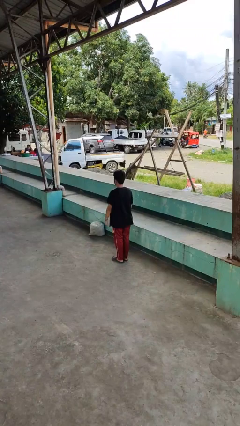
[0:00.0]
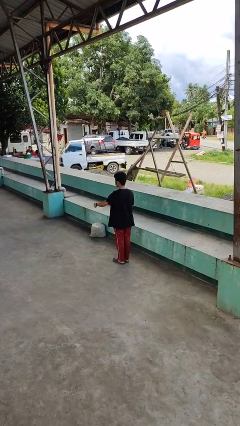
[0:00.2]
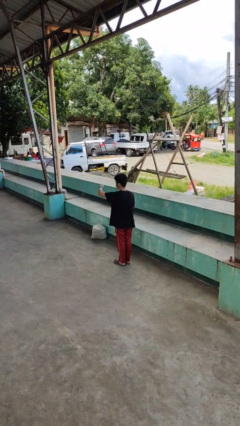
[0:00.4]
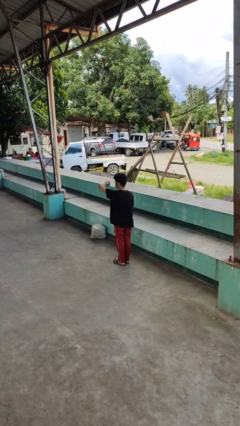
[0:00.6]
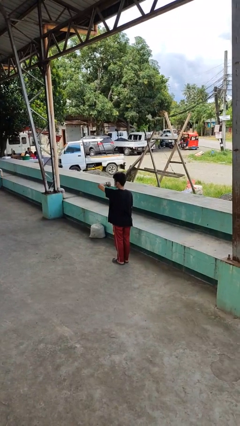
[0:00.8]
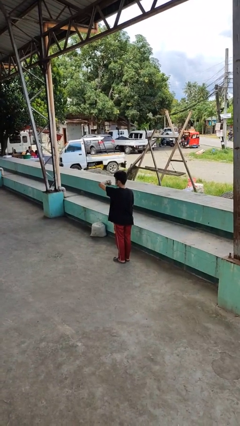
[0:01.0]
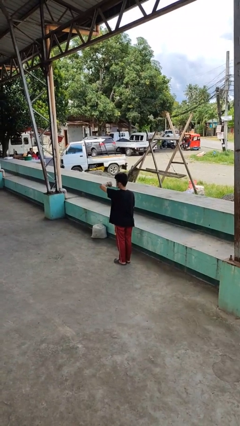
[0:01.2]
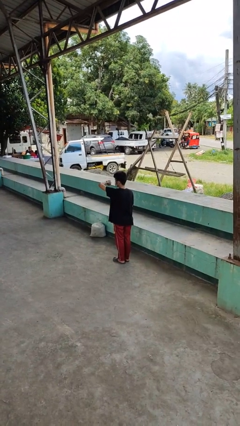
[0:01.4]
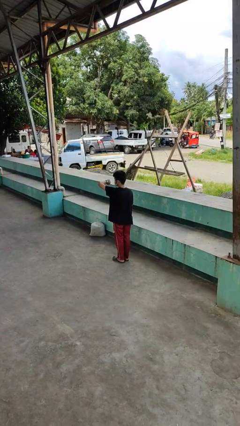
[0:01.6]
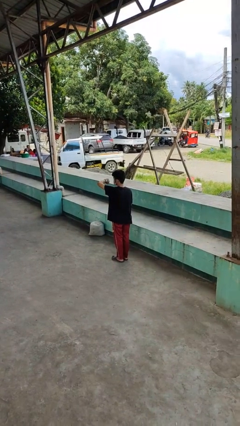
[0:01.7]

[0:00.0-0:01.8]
person looks at wristwatch

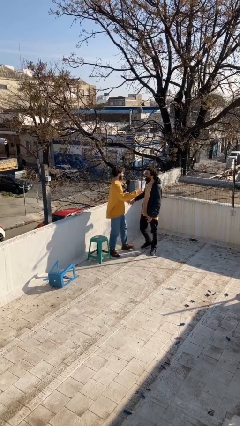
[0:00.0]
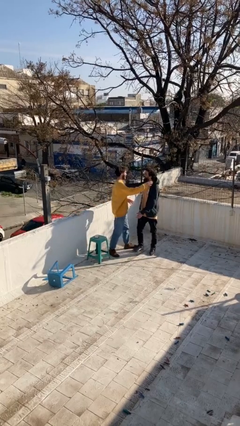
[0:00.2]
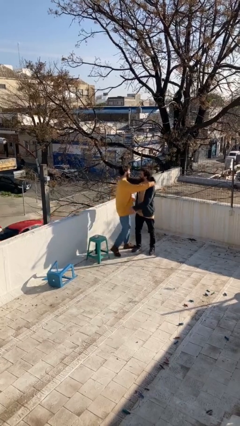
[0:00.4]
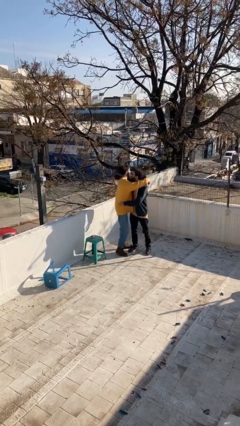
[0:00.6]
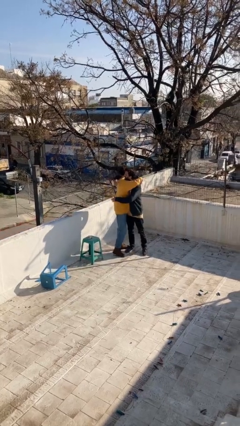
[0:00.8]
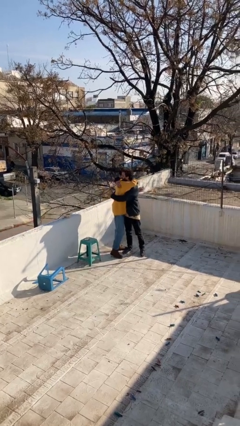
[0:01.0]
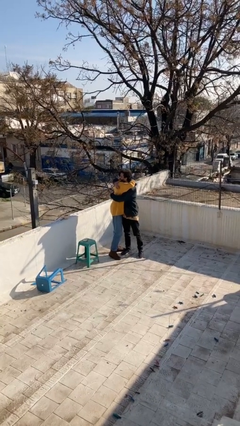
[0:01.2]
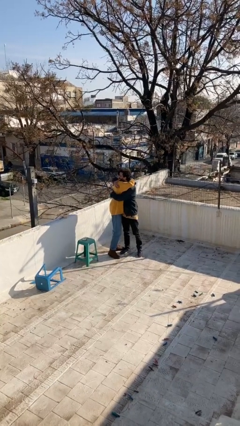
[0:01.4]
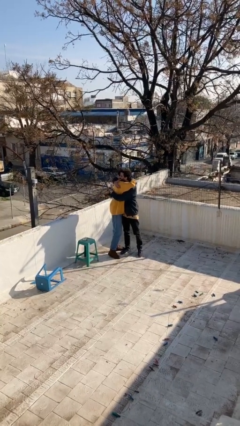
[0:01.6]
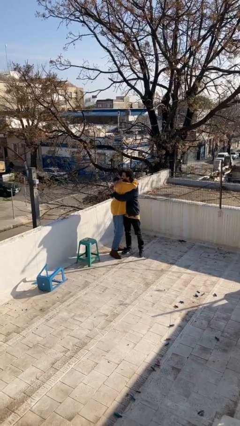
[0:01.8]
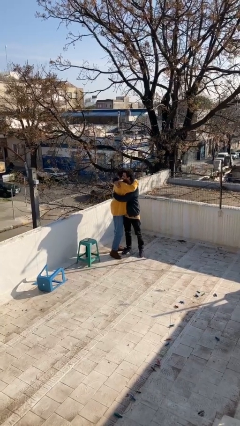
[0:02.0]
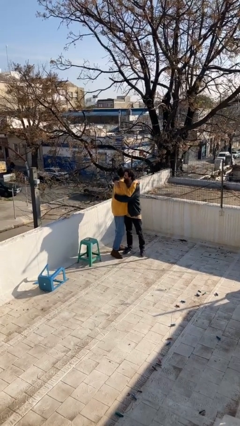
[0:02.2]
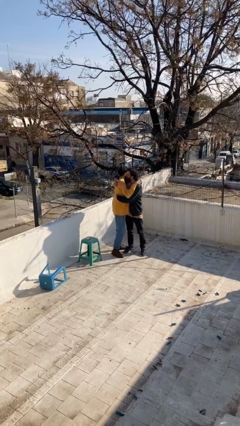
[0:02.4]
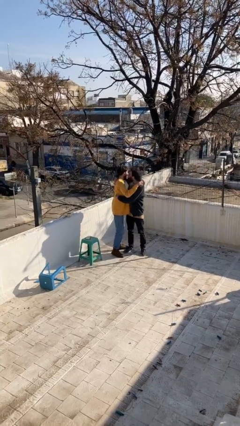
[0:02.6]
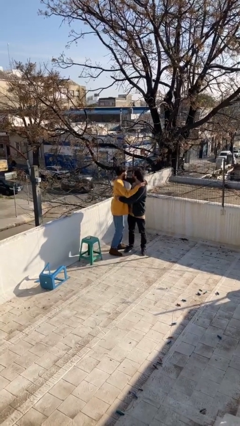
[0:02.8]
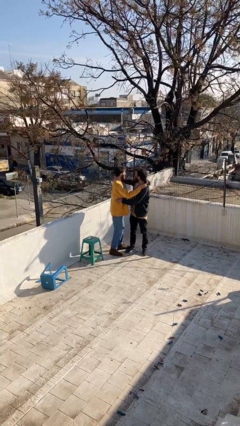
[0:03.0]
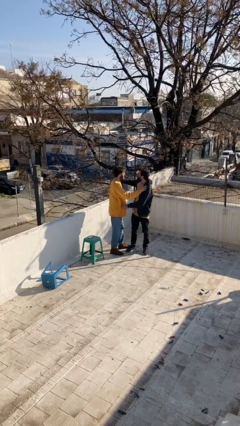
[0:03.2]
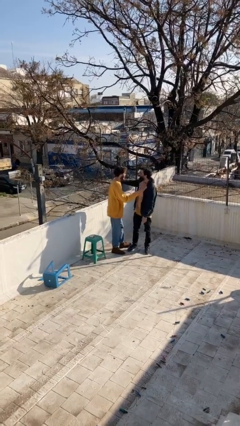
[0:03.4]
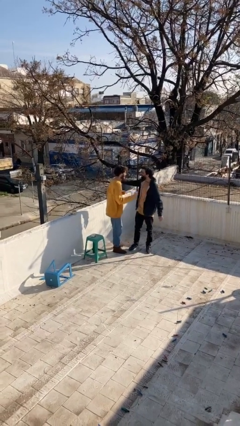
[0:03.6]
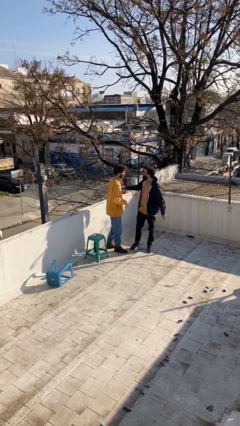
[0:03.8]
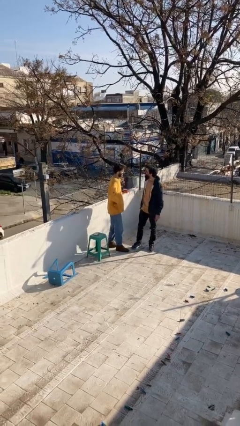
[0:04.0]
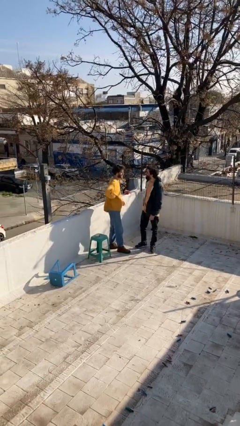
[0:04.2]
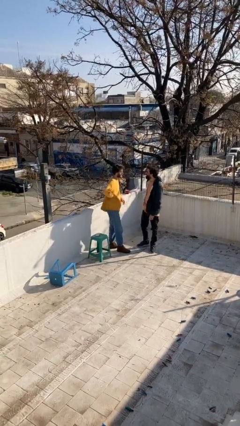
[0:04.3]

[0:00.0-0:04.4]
person embraces person

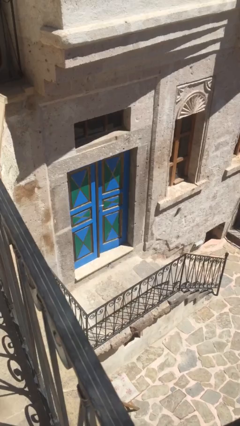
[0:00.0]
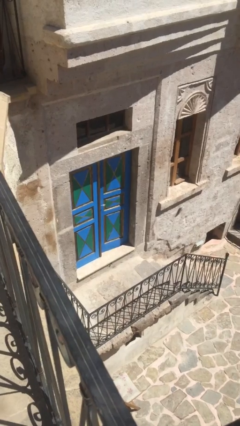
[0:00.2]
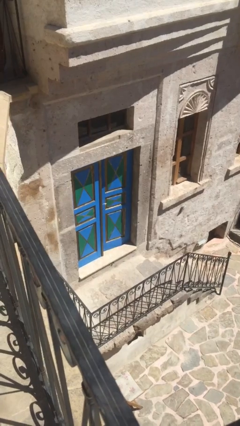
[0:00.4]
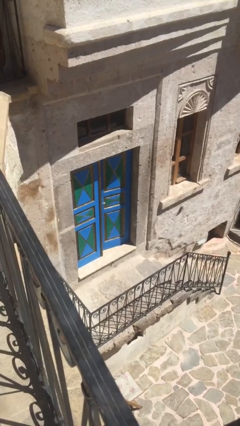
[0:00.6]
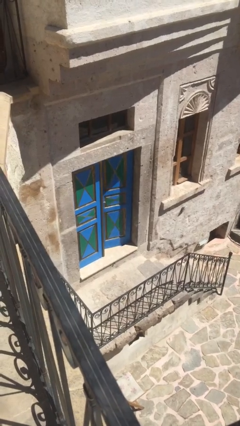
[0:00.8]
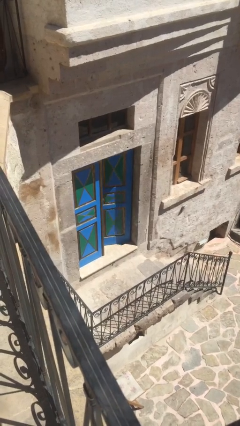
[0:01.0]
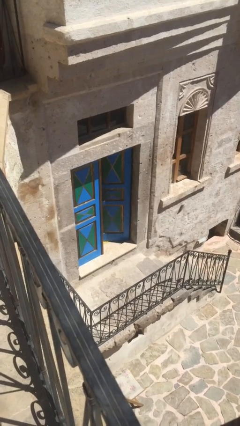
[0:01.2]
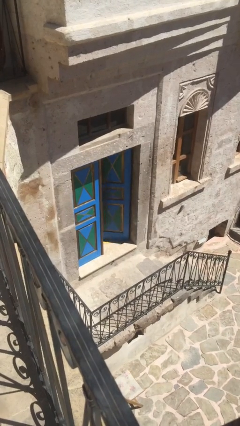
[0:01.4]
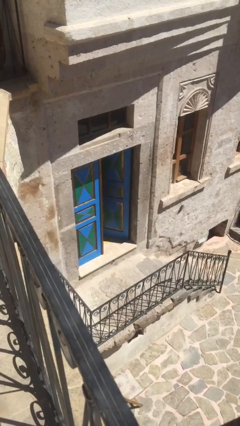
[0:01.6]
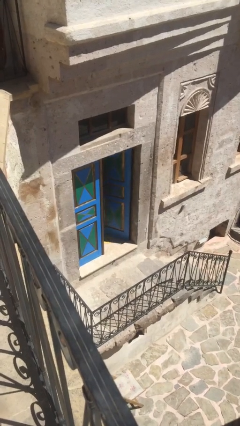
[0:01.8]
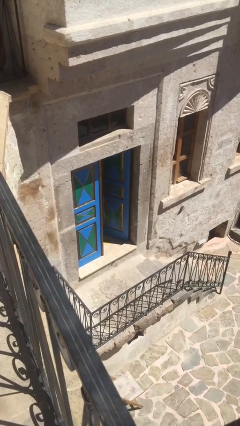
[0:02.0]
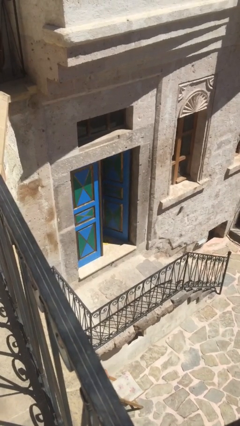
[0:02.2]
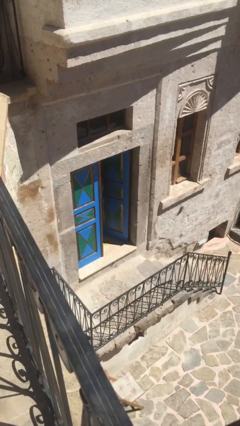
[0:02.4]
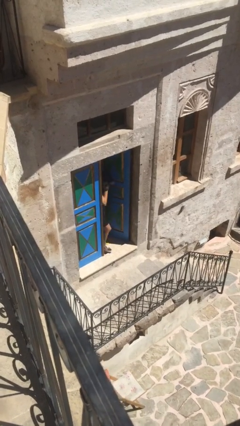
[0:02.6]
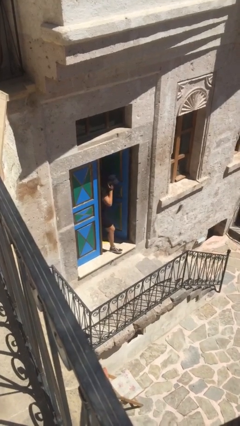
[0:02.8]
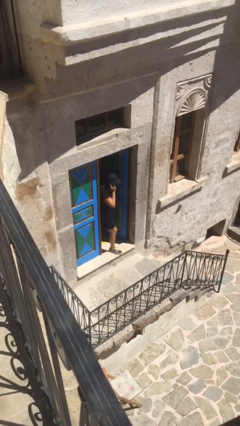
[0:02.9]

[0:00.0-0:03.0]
person opens facility door

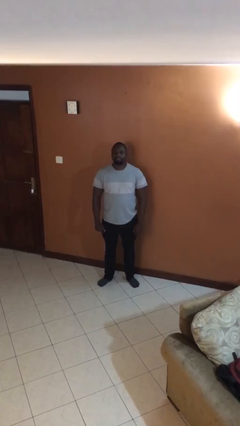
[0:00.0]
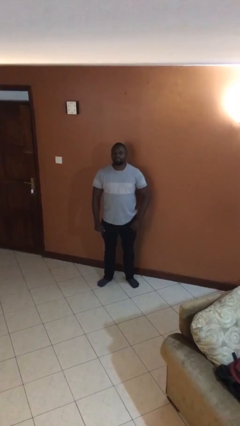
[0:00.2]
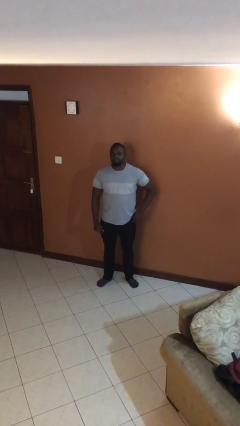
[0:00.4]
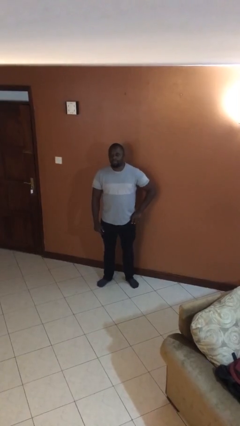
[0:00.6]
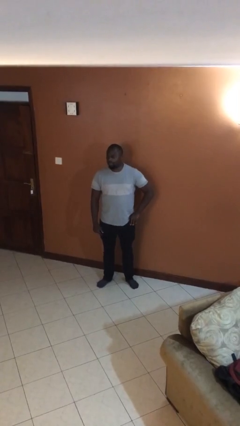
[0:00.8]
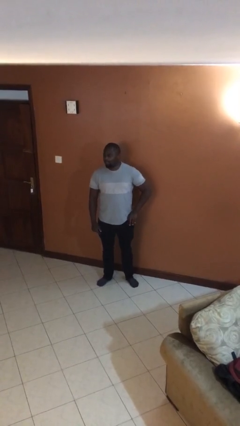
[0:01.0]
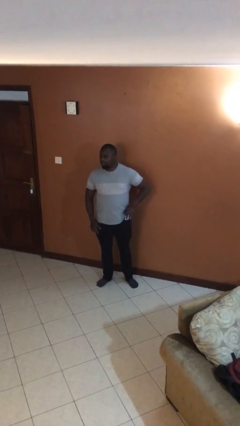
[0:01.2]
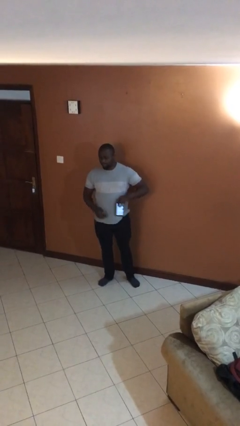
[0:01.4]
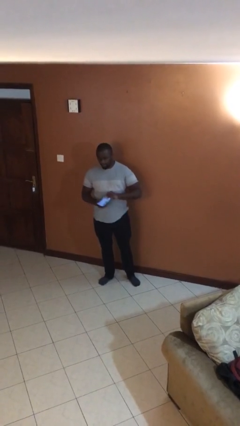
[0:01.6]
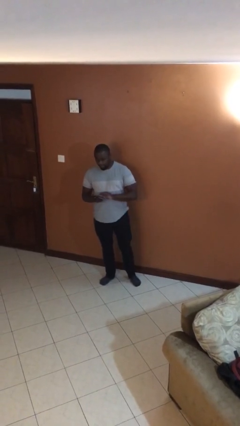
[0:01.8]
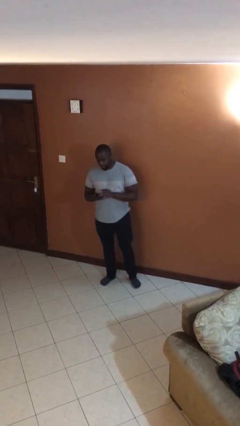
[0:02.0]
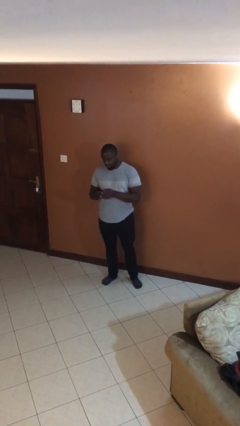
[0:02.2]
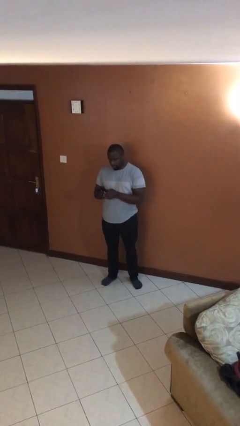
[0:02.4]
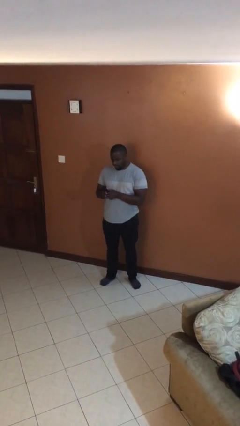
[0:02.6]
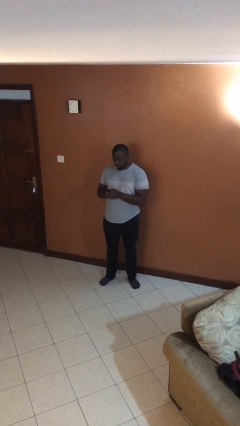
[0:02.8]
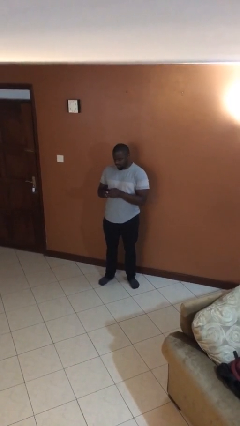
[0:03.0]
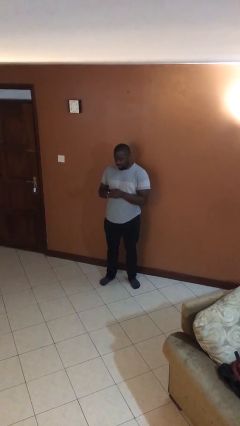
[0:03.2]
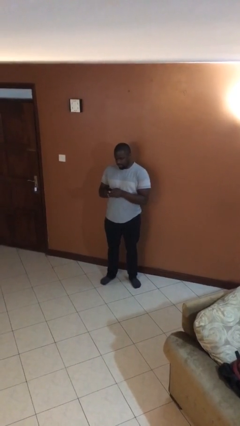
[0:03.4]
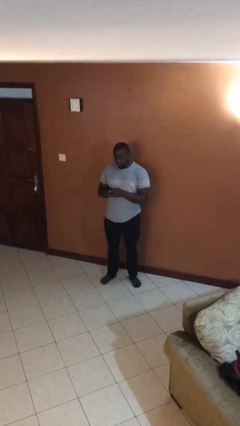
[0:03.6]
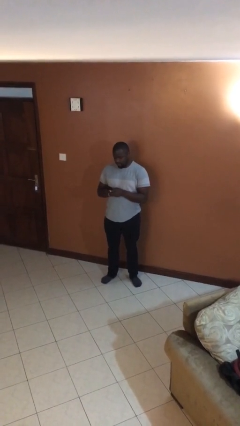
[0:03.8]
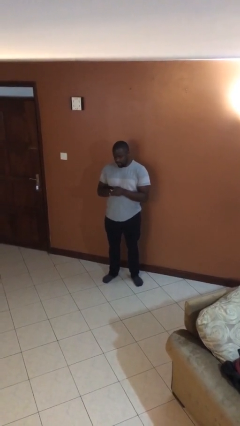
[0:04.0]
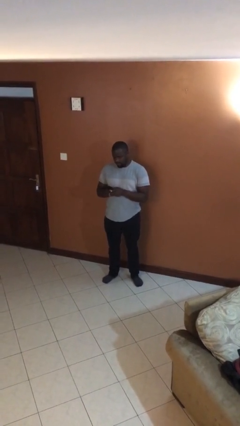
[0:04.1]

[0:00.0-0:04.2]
person takes phone from pocket

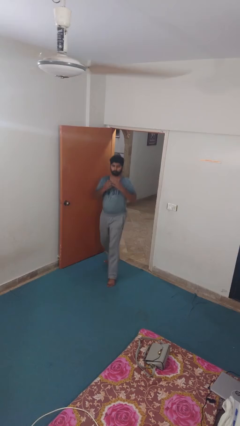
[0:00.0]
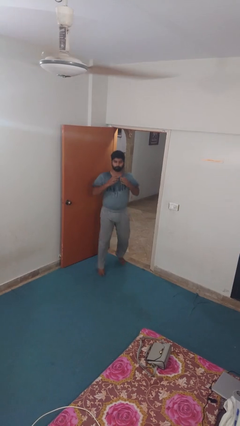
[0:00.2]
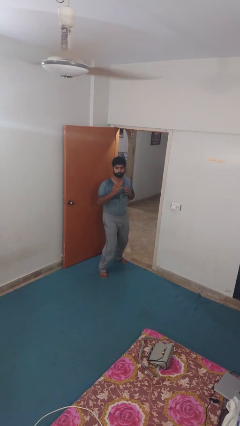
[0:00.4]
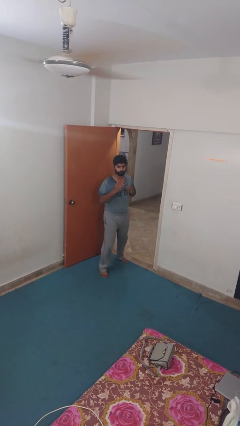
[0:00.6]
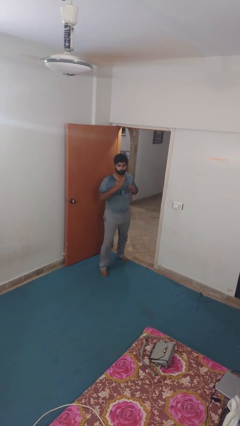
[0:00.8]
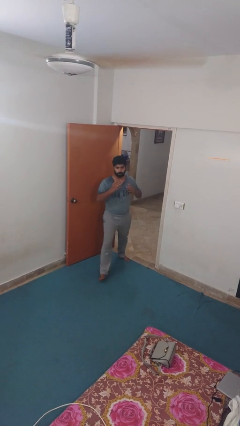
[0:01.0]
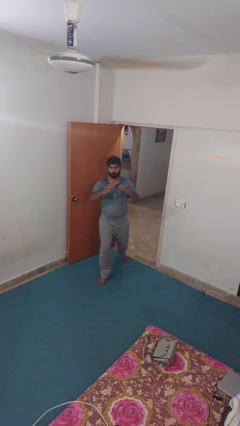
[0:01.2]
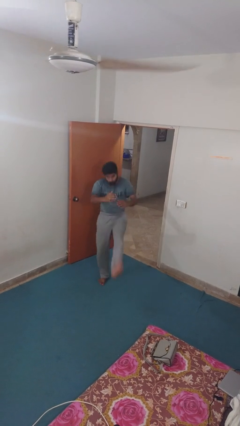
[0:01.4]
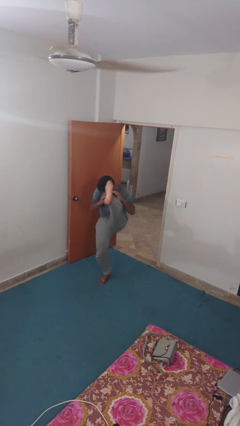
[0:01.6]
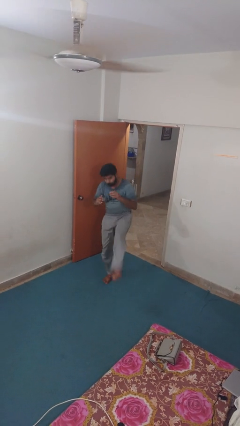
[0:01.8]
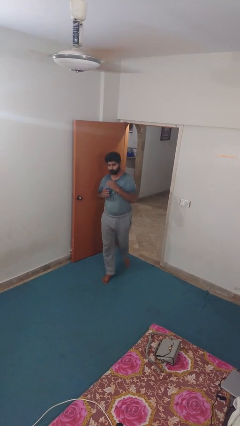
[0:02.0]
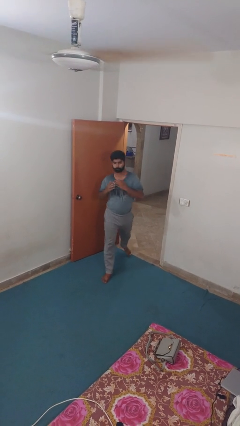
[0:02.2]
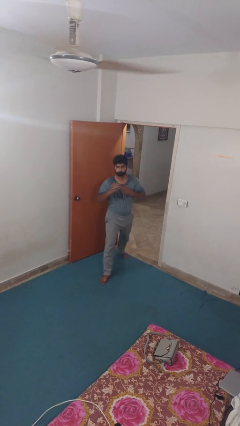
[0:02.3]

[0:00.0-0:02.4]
person karate kicks

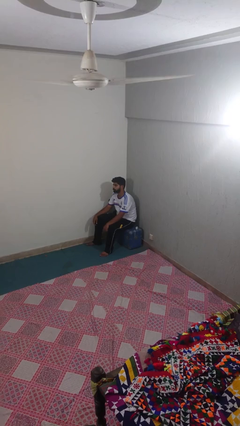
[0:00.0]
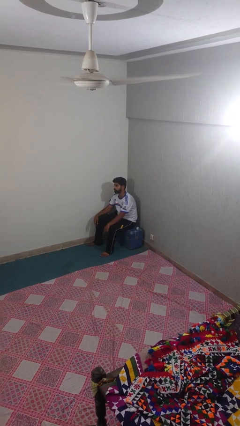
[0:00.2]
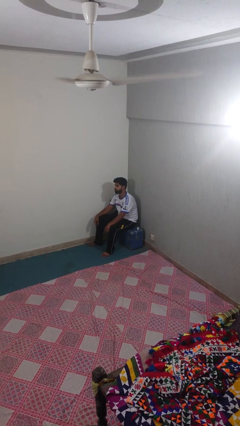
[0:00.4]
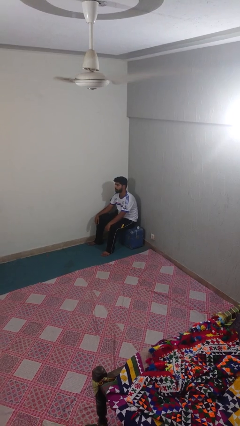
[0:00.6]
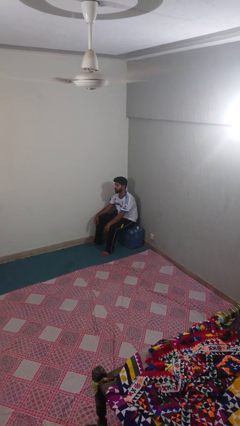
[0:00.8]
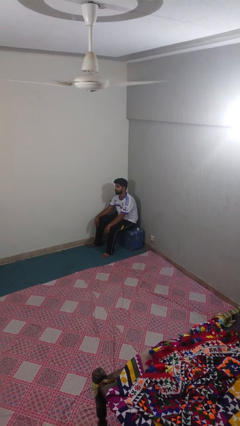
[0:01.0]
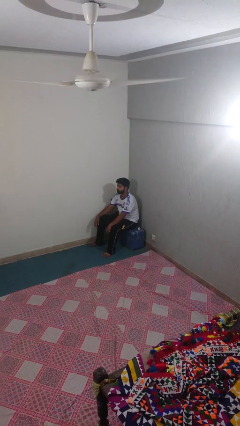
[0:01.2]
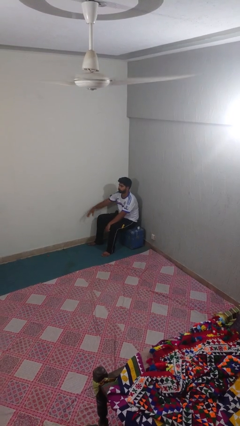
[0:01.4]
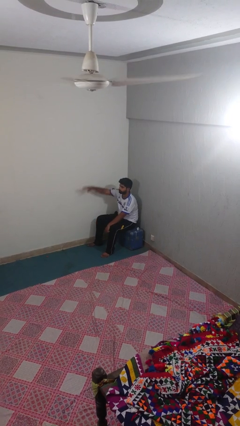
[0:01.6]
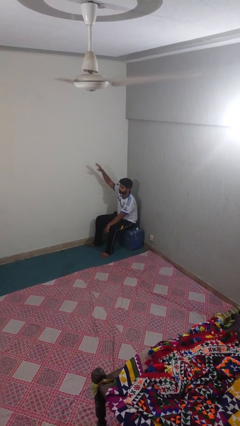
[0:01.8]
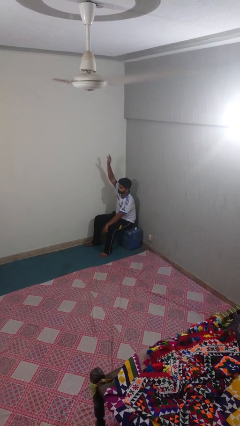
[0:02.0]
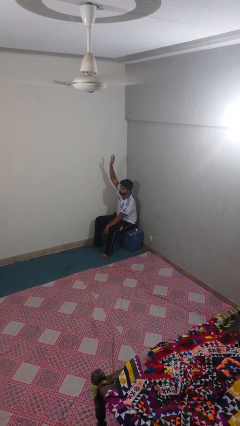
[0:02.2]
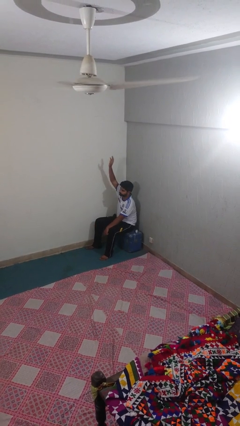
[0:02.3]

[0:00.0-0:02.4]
person gestures raise hand
